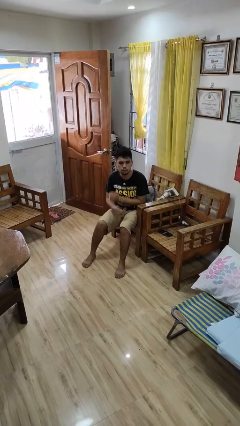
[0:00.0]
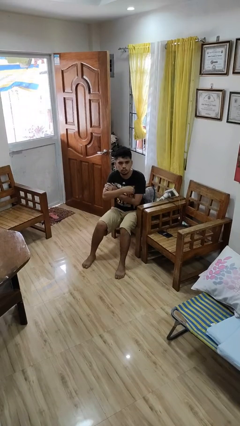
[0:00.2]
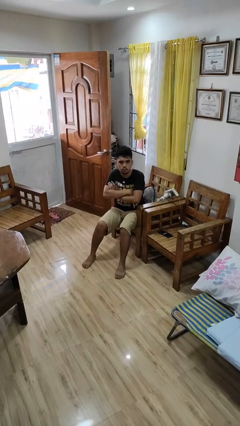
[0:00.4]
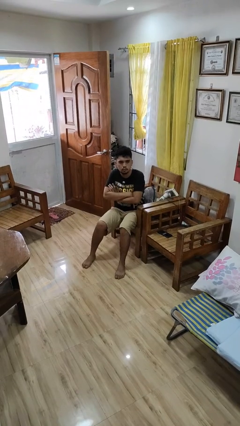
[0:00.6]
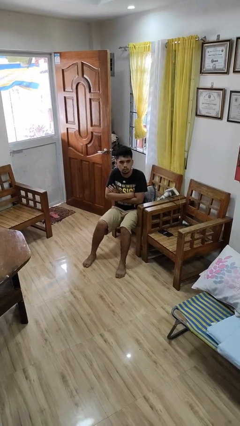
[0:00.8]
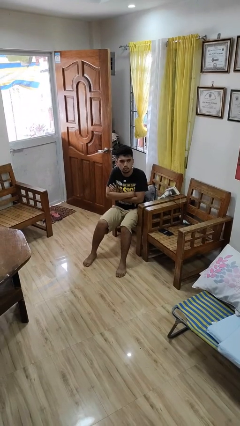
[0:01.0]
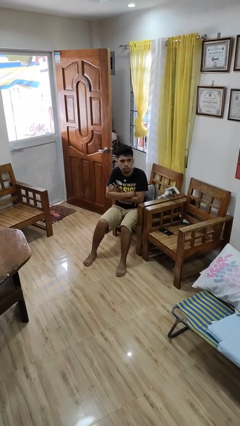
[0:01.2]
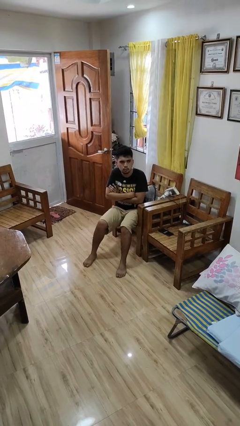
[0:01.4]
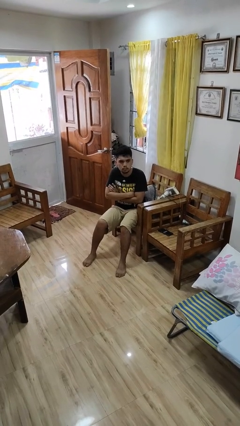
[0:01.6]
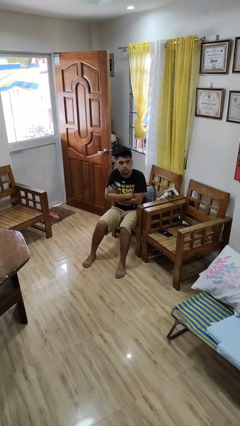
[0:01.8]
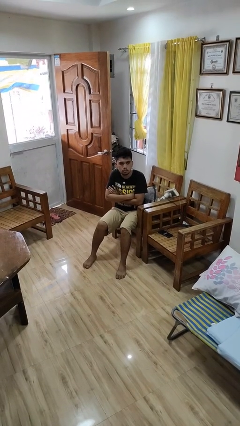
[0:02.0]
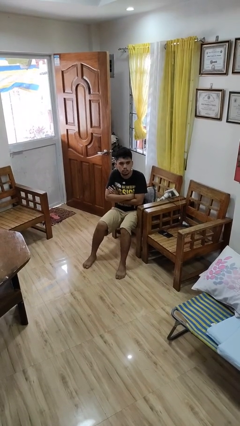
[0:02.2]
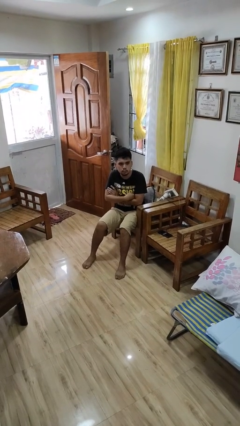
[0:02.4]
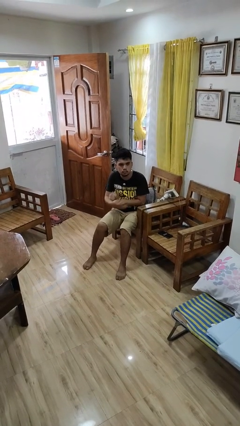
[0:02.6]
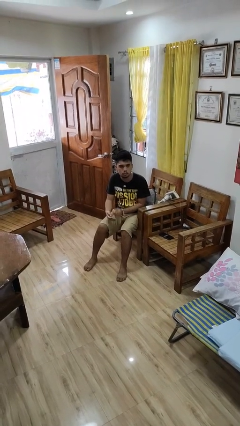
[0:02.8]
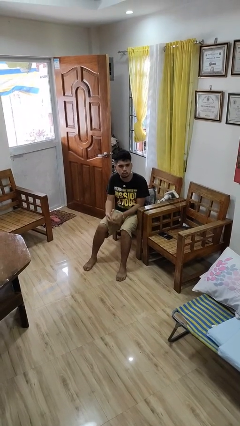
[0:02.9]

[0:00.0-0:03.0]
person crosses arms

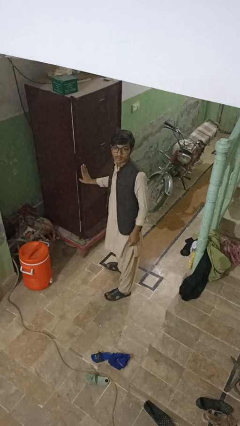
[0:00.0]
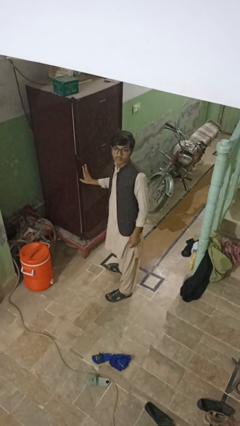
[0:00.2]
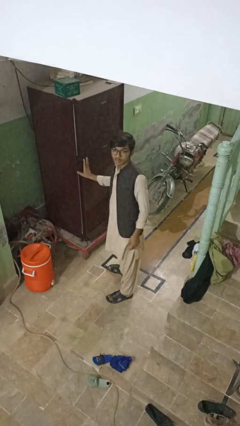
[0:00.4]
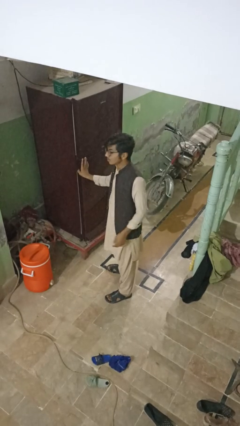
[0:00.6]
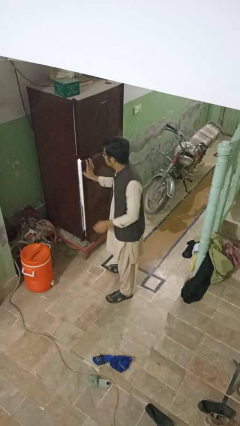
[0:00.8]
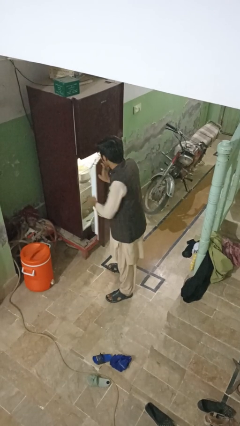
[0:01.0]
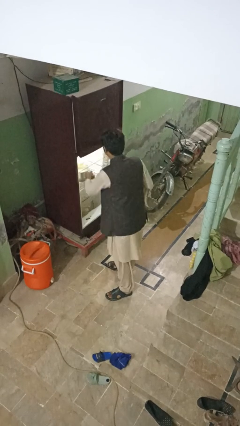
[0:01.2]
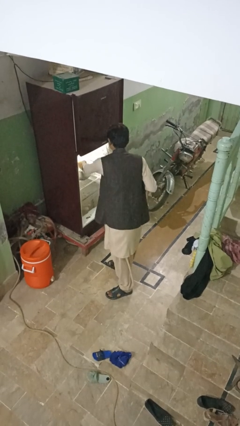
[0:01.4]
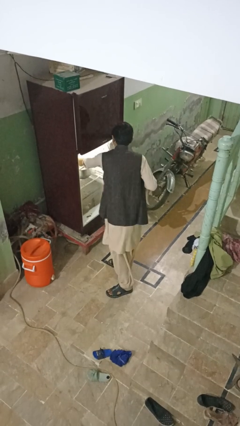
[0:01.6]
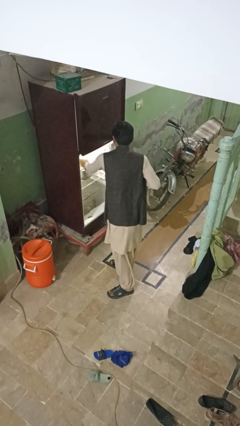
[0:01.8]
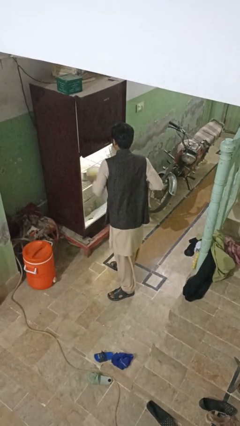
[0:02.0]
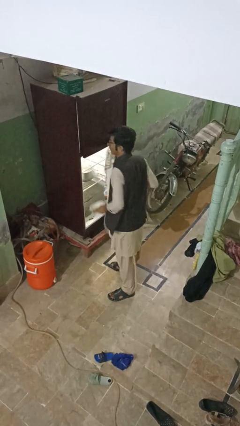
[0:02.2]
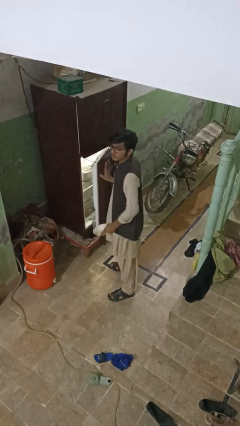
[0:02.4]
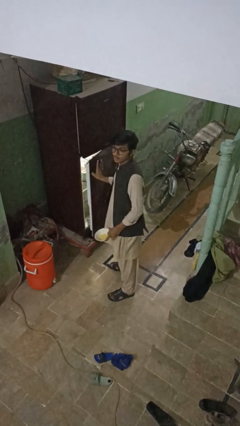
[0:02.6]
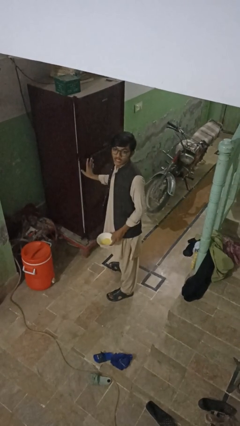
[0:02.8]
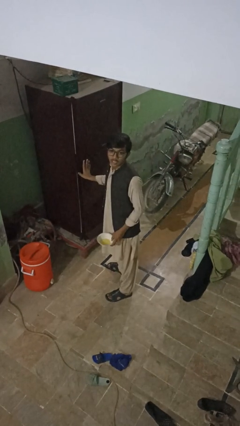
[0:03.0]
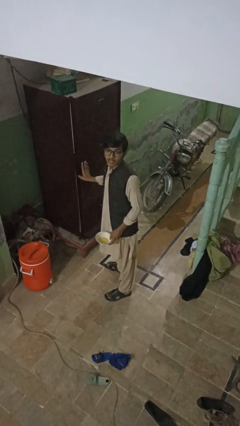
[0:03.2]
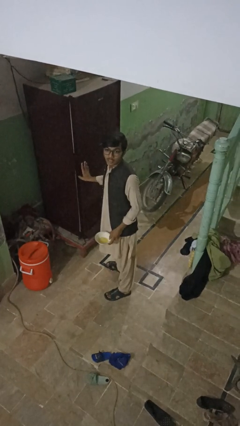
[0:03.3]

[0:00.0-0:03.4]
person takes object from refrigerator

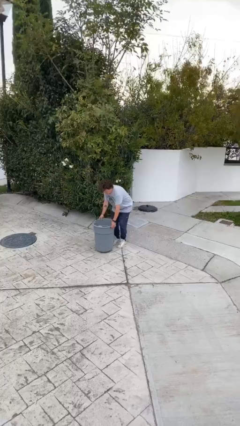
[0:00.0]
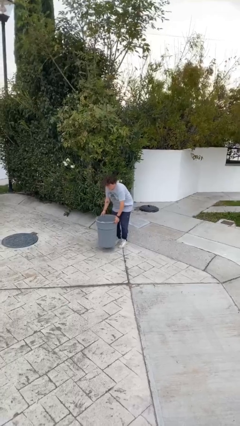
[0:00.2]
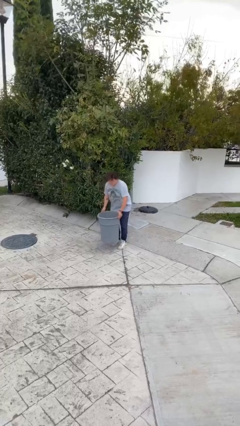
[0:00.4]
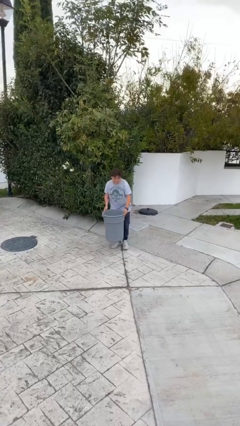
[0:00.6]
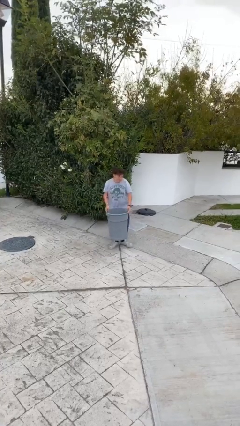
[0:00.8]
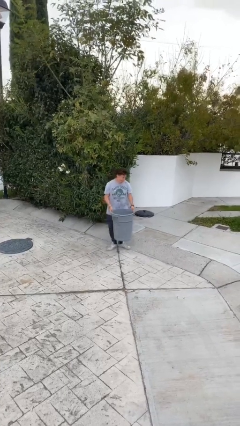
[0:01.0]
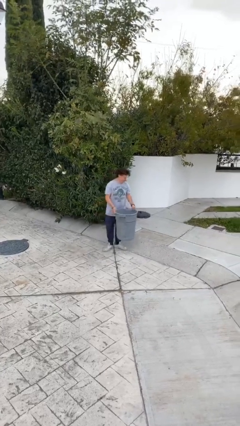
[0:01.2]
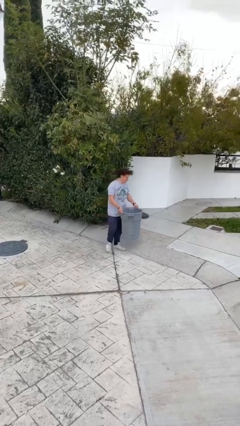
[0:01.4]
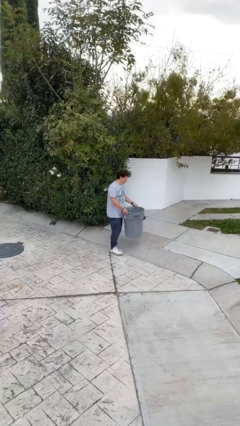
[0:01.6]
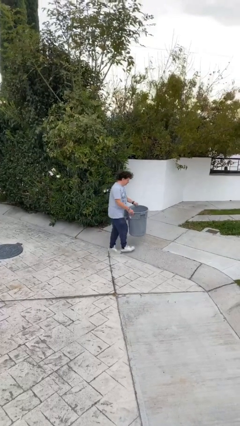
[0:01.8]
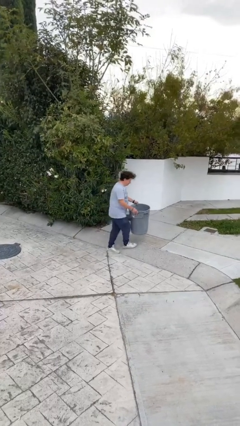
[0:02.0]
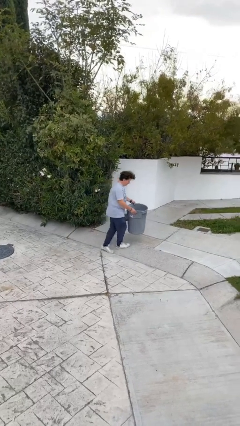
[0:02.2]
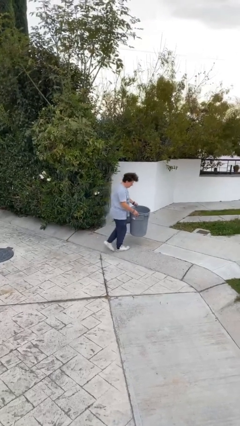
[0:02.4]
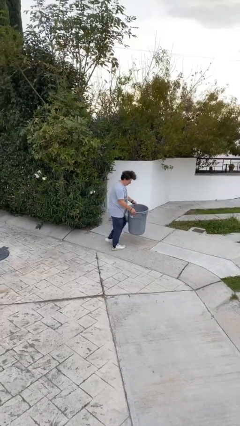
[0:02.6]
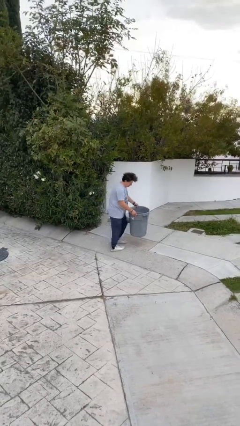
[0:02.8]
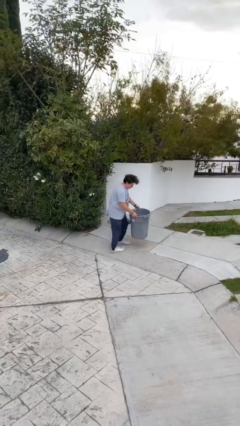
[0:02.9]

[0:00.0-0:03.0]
person carries heavy object

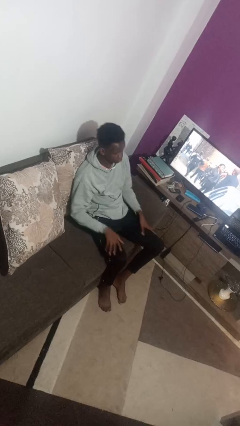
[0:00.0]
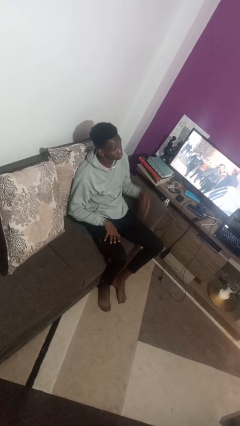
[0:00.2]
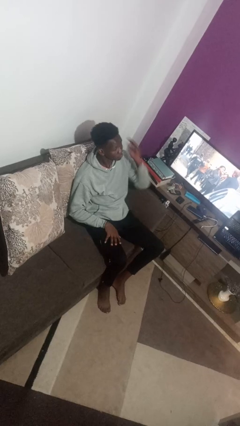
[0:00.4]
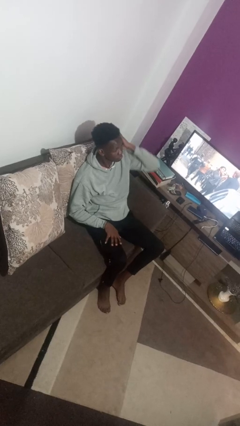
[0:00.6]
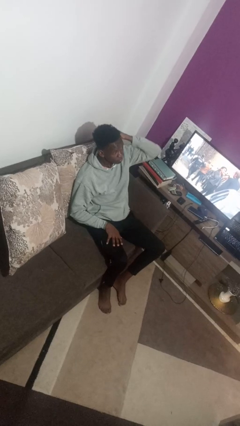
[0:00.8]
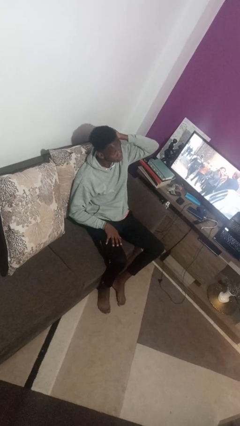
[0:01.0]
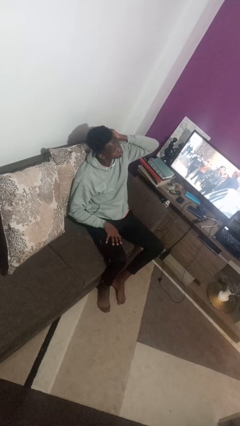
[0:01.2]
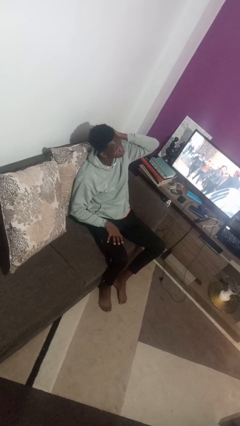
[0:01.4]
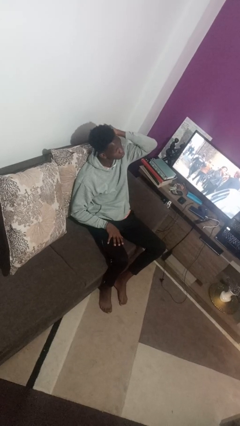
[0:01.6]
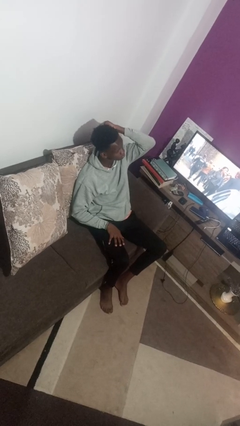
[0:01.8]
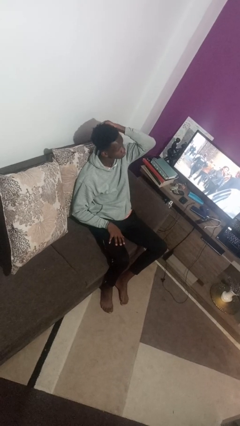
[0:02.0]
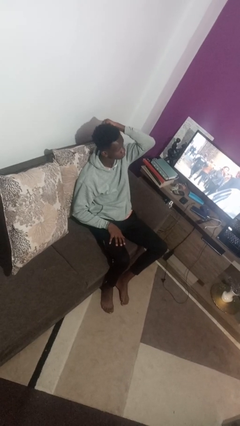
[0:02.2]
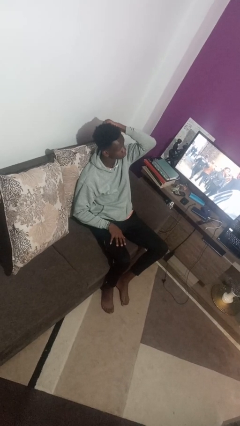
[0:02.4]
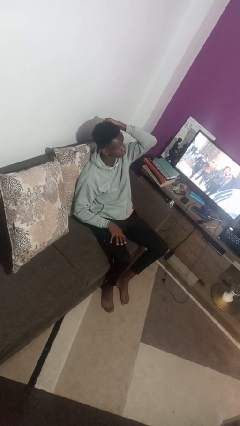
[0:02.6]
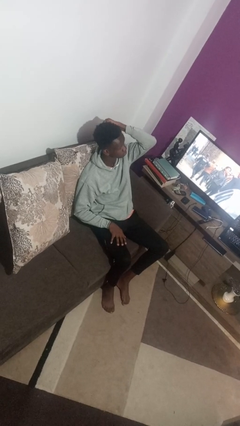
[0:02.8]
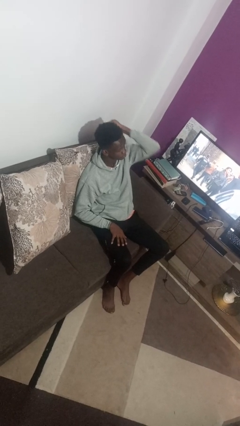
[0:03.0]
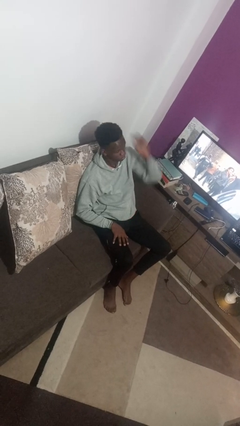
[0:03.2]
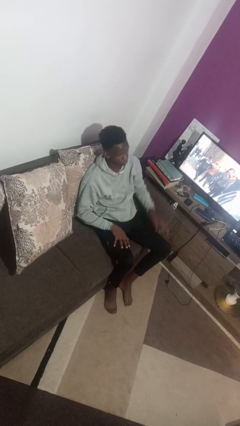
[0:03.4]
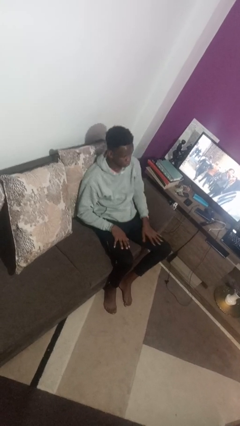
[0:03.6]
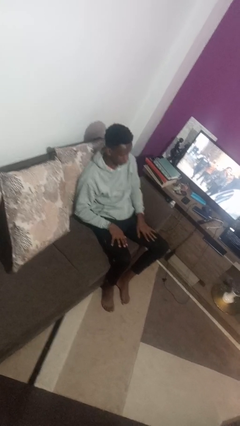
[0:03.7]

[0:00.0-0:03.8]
person strokes hair

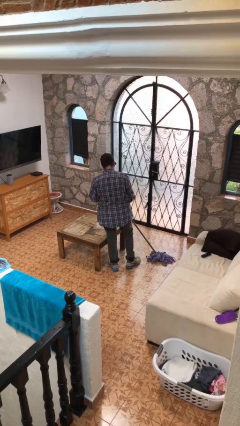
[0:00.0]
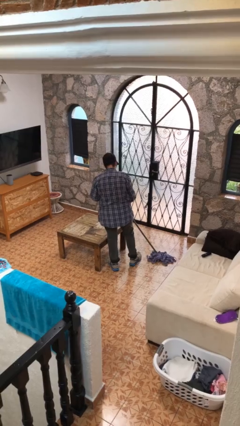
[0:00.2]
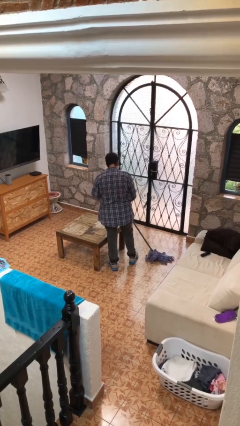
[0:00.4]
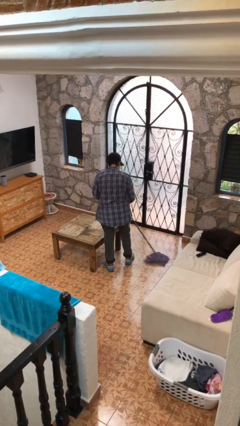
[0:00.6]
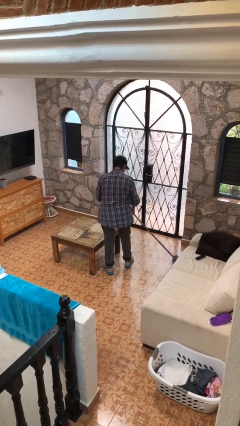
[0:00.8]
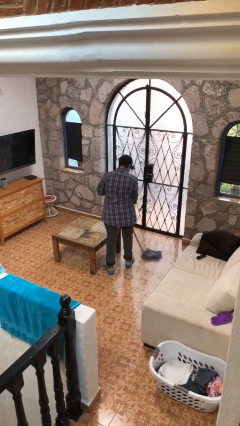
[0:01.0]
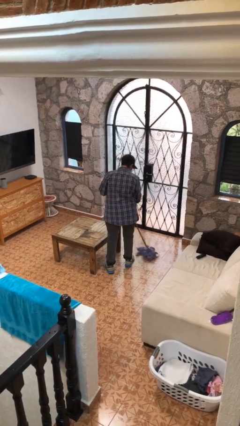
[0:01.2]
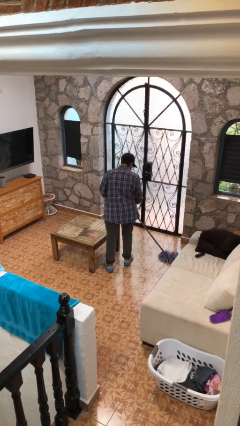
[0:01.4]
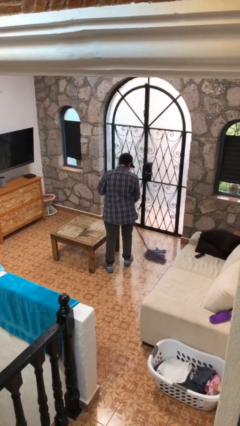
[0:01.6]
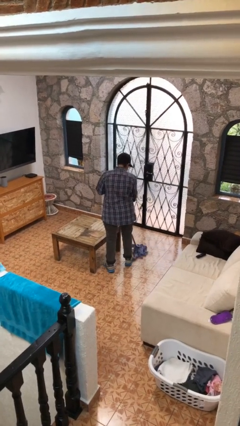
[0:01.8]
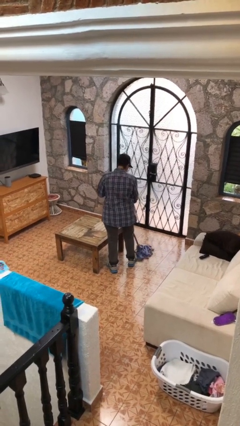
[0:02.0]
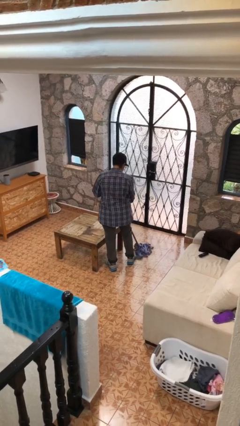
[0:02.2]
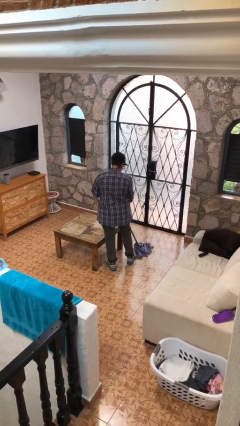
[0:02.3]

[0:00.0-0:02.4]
person mops

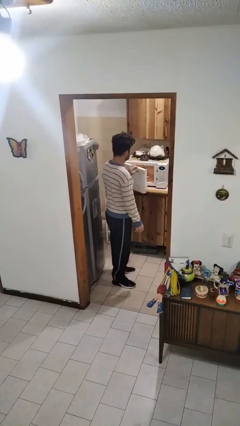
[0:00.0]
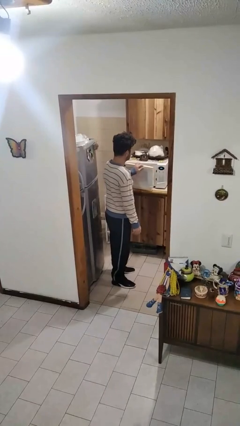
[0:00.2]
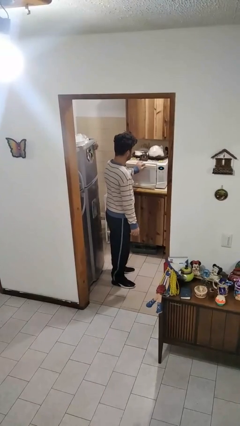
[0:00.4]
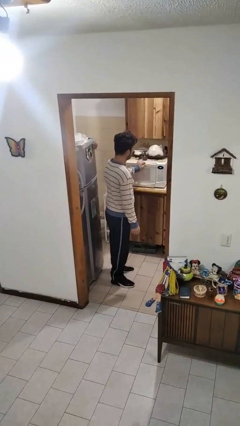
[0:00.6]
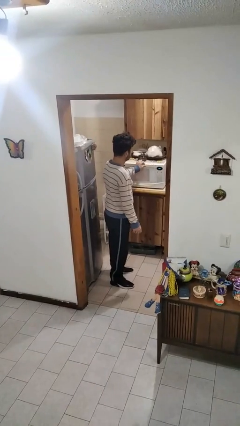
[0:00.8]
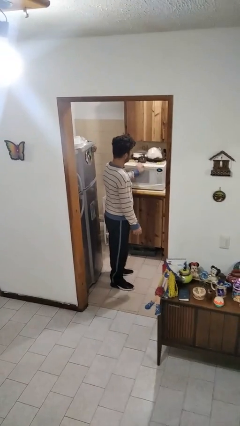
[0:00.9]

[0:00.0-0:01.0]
person closes microwave

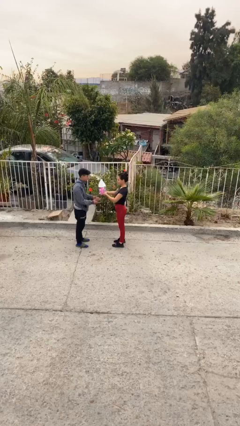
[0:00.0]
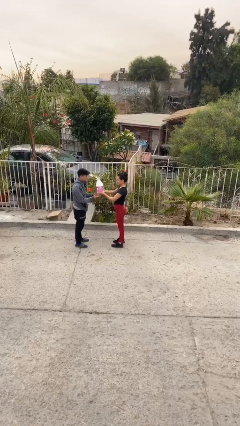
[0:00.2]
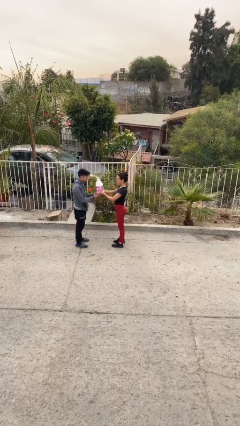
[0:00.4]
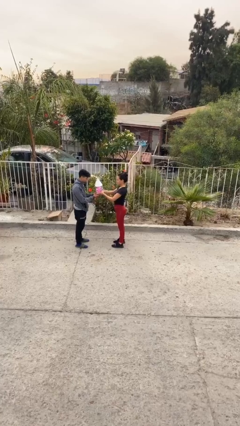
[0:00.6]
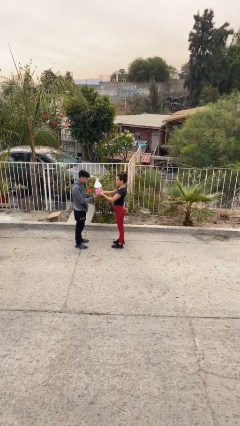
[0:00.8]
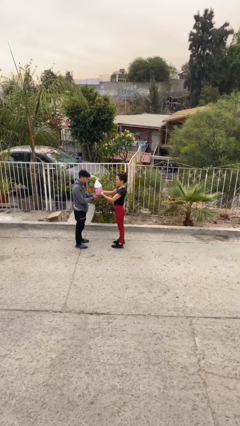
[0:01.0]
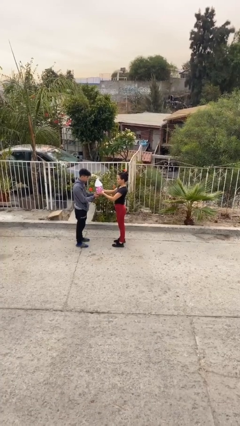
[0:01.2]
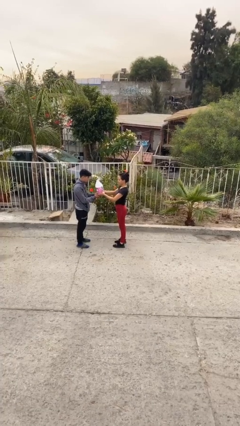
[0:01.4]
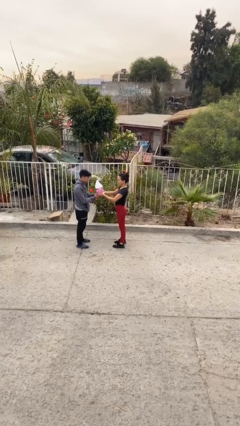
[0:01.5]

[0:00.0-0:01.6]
person transfers object to person
